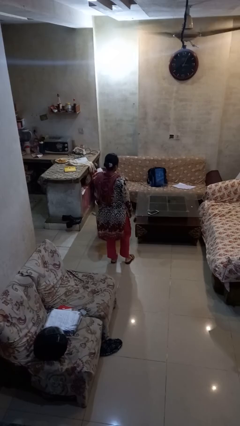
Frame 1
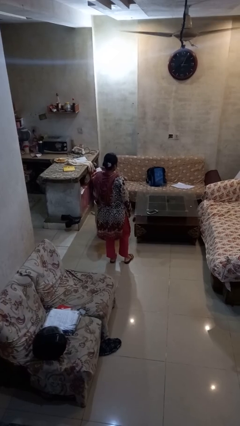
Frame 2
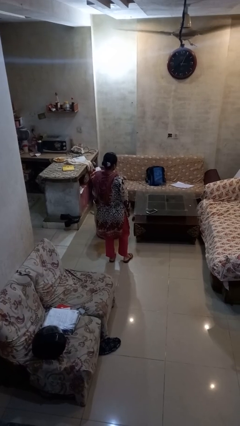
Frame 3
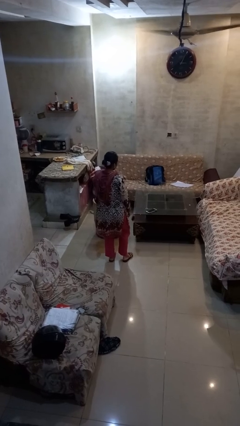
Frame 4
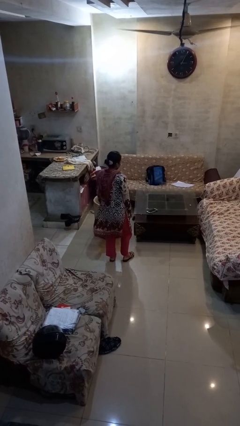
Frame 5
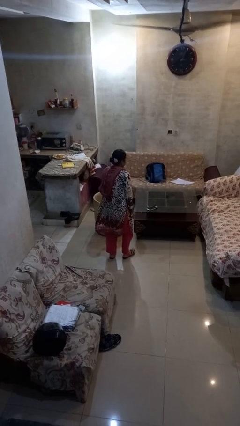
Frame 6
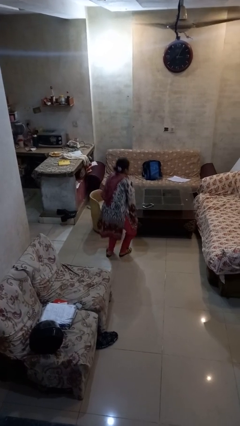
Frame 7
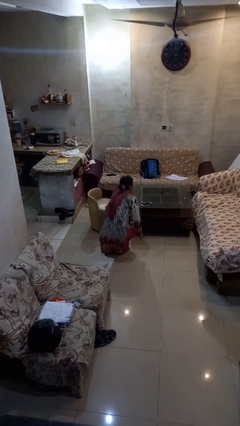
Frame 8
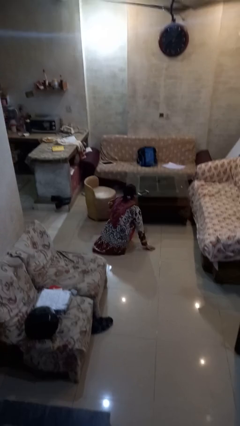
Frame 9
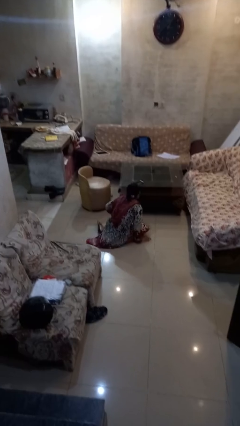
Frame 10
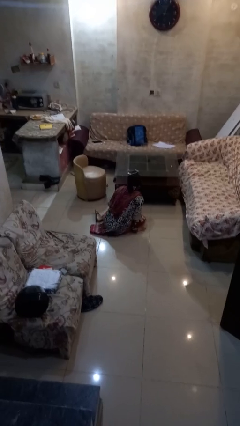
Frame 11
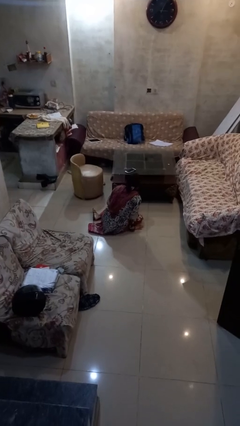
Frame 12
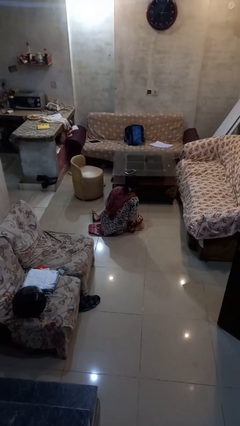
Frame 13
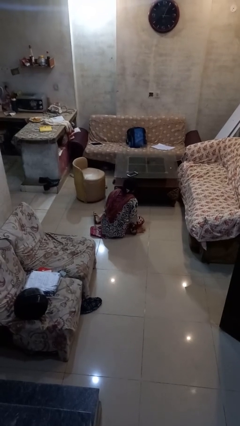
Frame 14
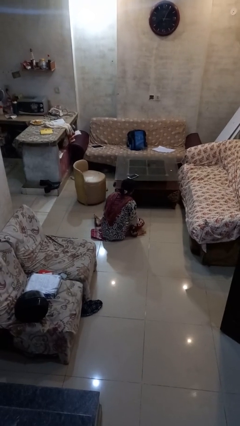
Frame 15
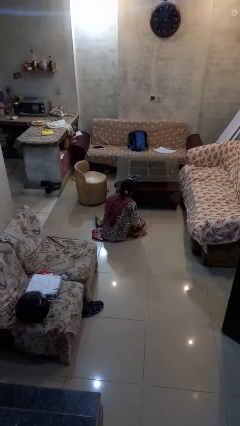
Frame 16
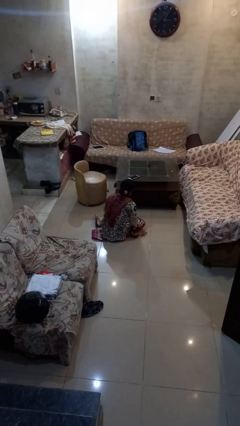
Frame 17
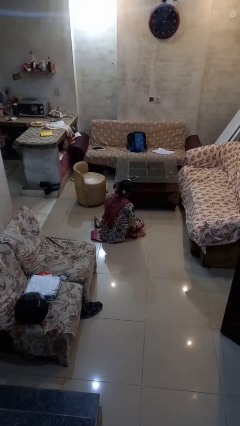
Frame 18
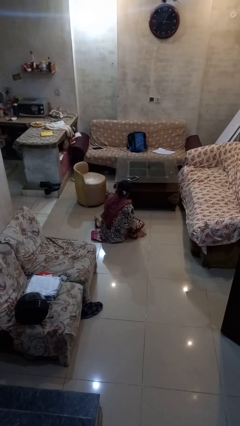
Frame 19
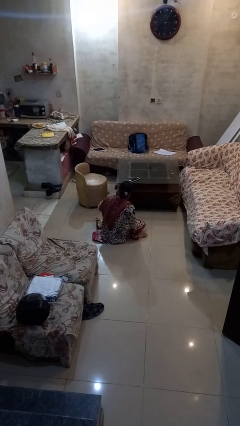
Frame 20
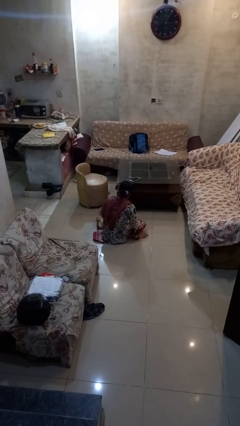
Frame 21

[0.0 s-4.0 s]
person falls while standing

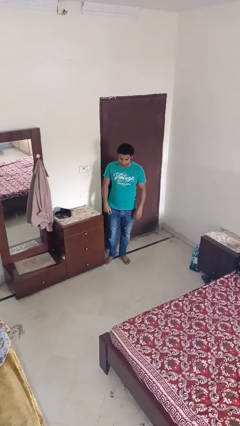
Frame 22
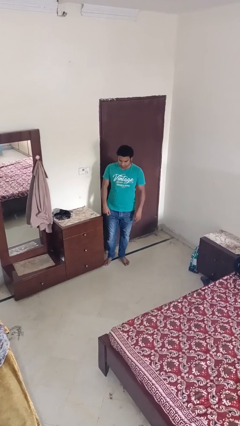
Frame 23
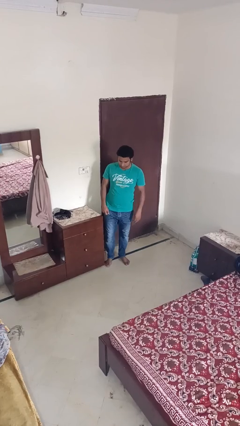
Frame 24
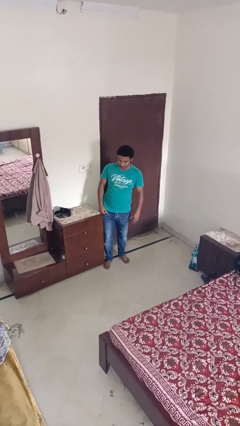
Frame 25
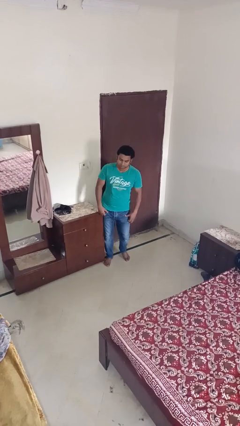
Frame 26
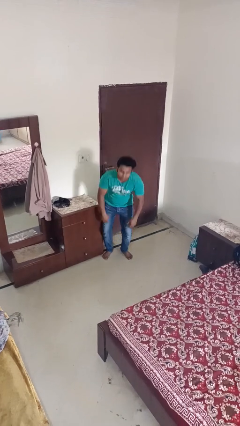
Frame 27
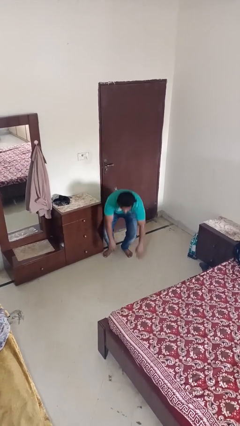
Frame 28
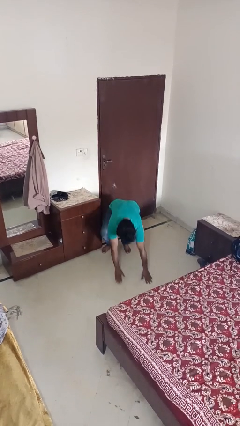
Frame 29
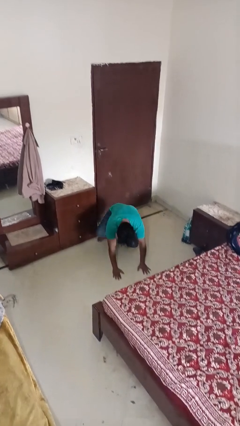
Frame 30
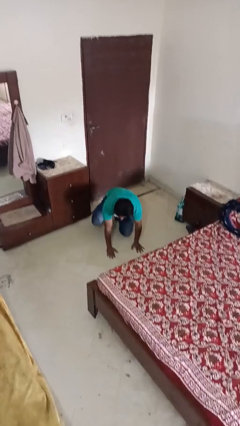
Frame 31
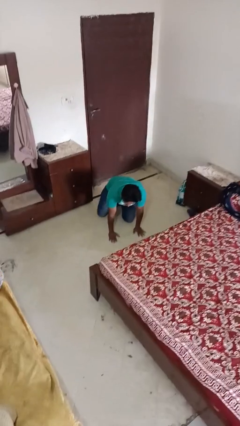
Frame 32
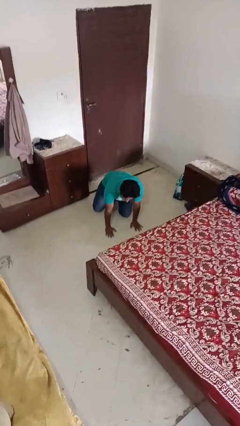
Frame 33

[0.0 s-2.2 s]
person trips on object on floor

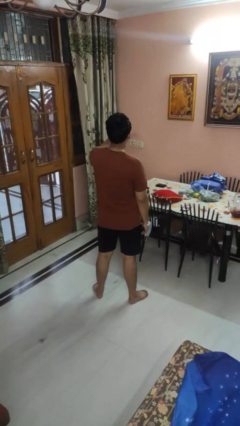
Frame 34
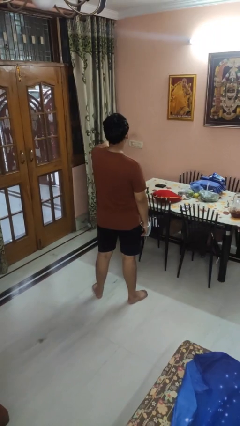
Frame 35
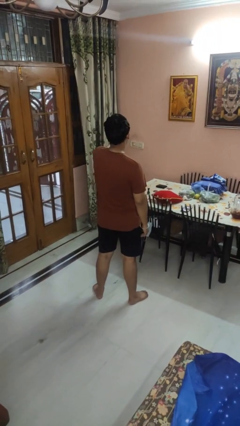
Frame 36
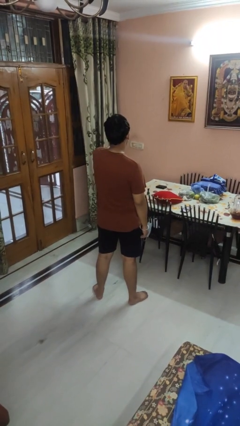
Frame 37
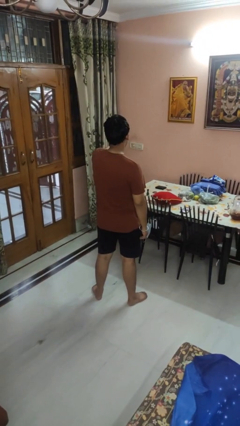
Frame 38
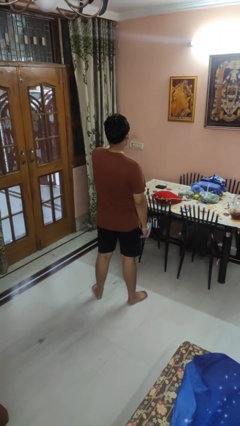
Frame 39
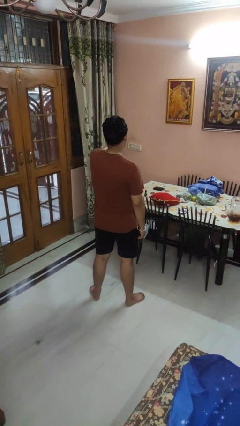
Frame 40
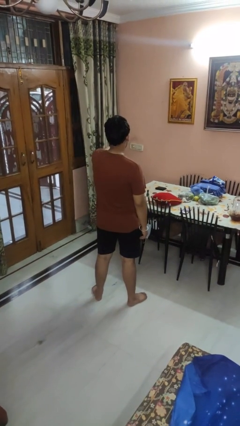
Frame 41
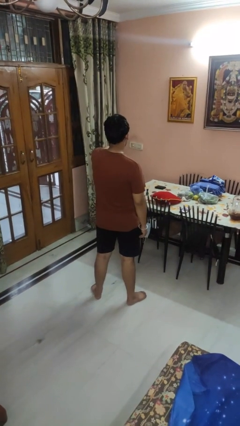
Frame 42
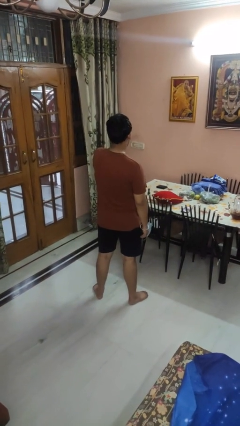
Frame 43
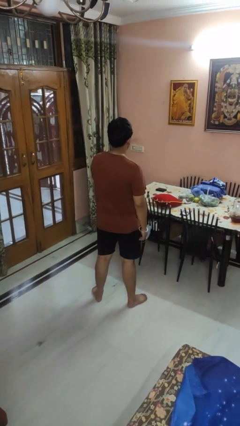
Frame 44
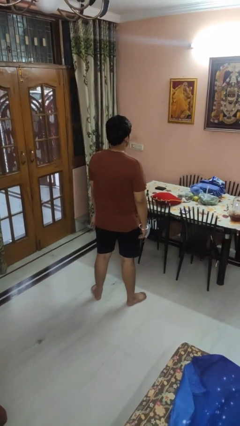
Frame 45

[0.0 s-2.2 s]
person gestures stop

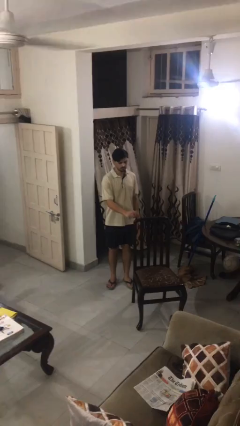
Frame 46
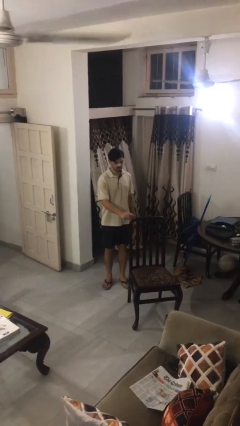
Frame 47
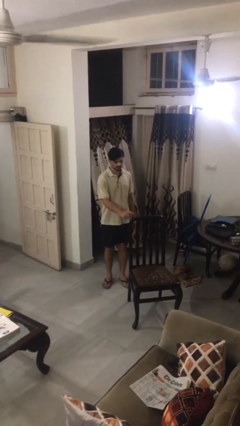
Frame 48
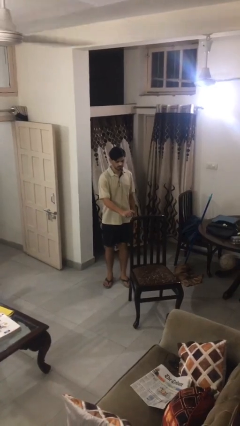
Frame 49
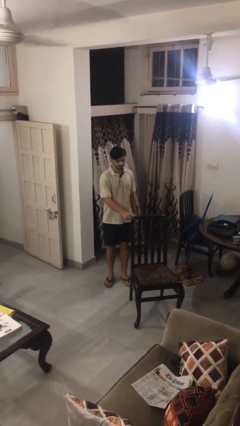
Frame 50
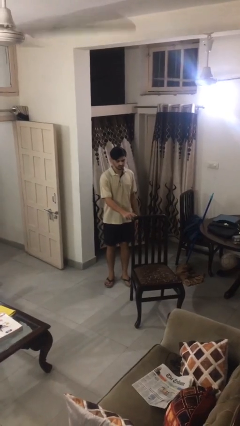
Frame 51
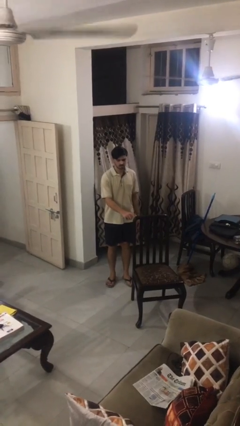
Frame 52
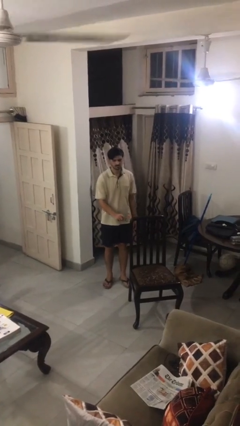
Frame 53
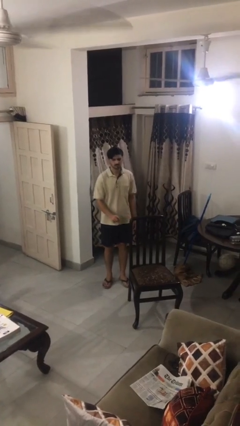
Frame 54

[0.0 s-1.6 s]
person taps object with finger

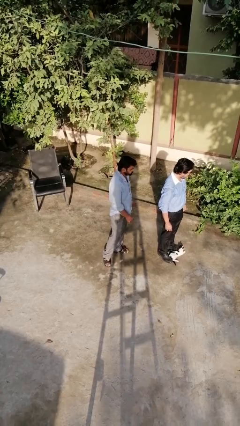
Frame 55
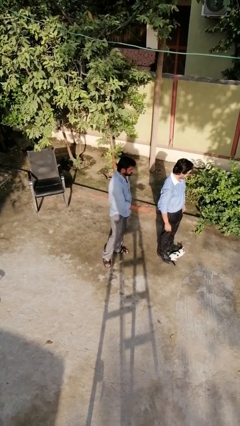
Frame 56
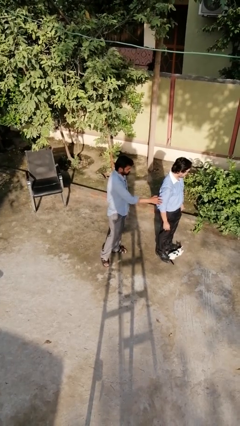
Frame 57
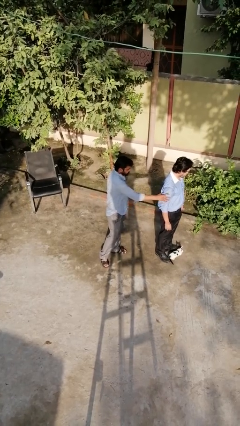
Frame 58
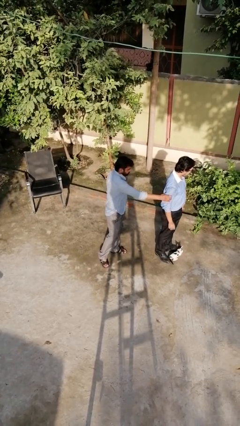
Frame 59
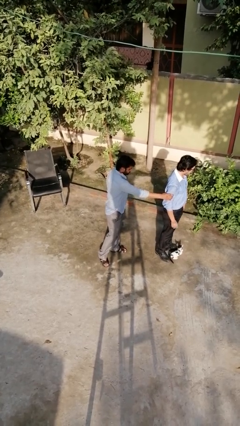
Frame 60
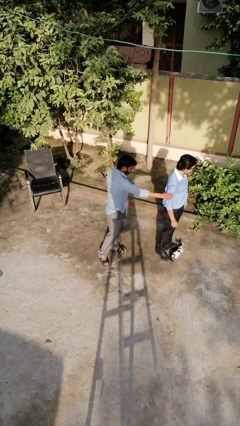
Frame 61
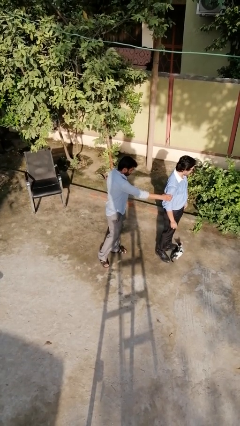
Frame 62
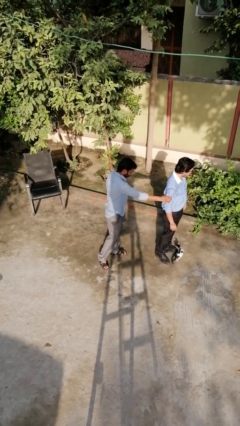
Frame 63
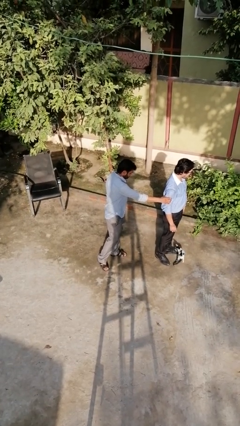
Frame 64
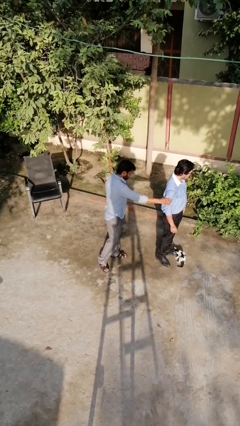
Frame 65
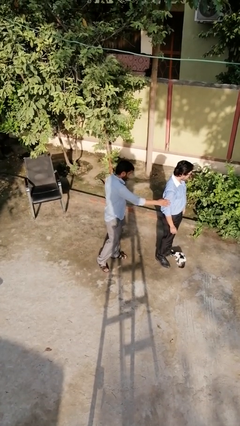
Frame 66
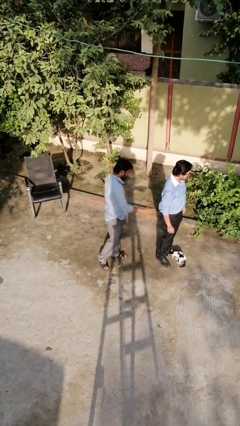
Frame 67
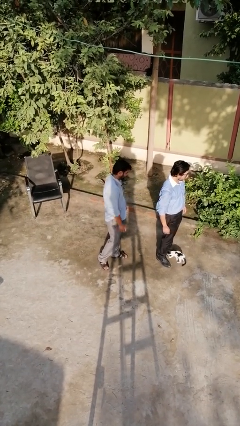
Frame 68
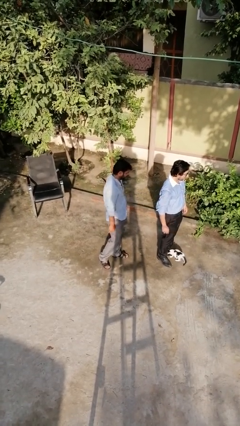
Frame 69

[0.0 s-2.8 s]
person grabs person by bicep

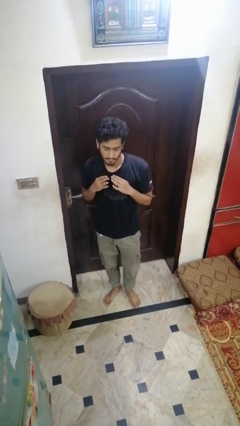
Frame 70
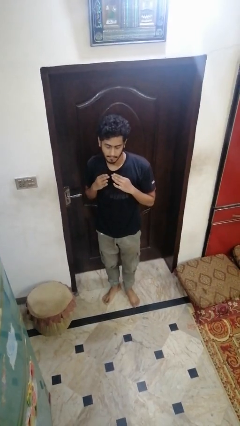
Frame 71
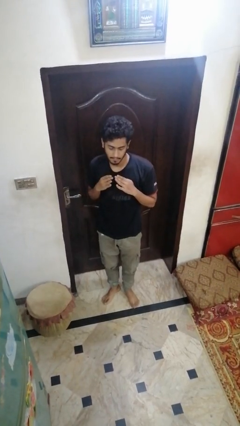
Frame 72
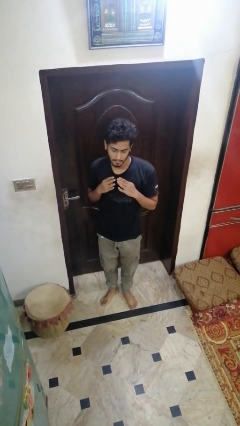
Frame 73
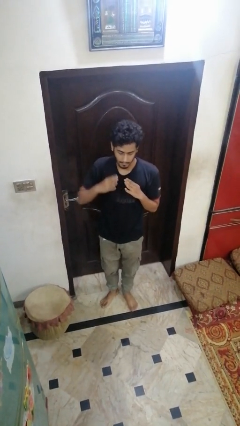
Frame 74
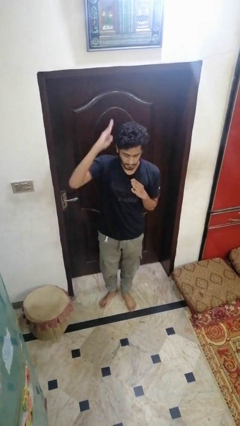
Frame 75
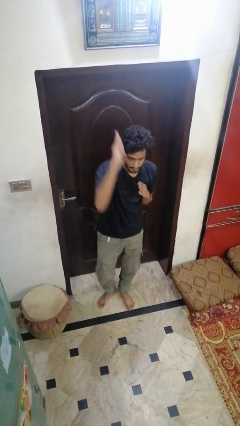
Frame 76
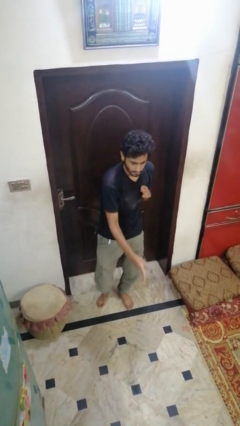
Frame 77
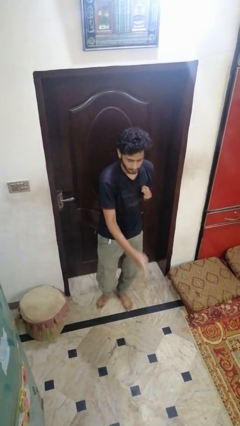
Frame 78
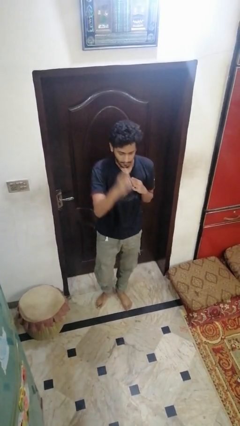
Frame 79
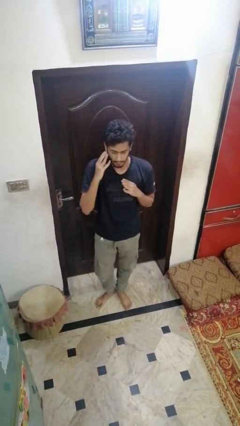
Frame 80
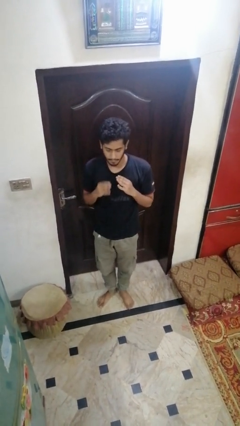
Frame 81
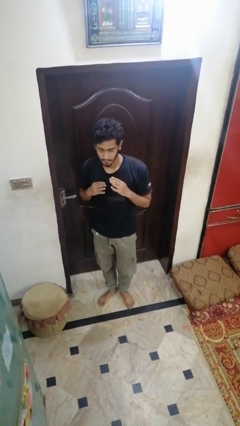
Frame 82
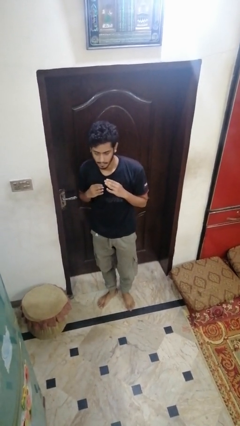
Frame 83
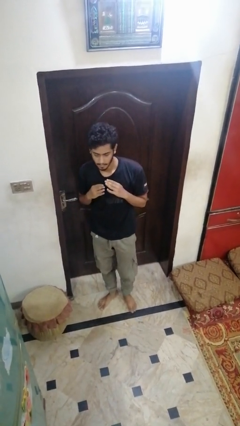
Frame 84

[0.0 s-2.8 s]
person flosses

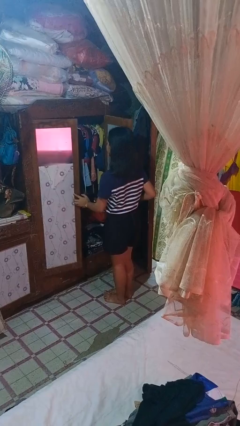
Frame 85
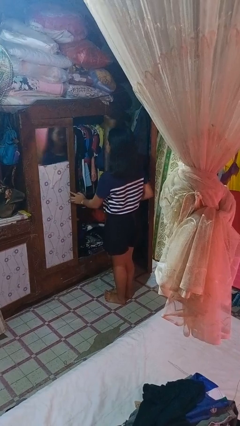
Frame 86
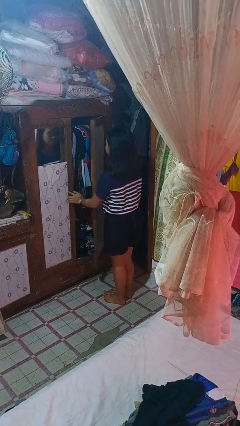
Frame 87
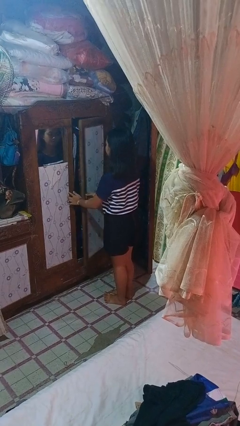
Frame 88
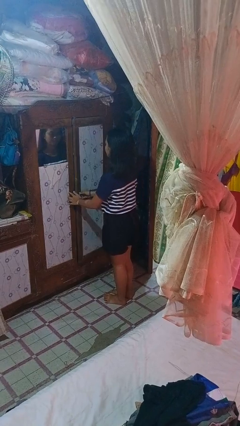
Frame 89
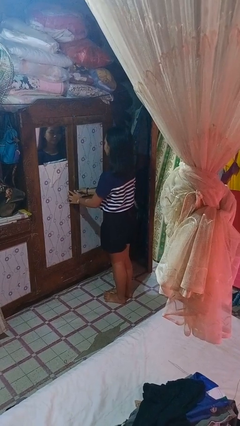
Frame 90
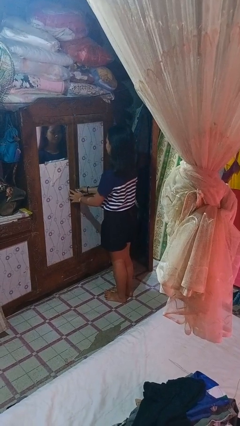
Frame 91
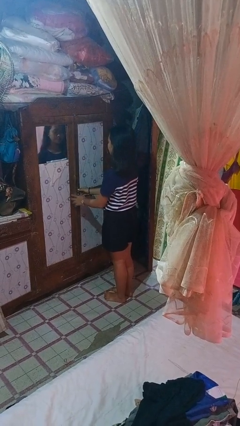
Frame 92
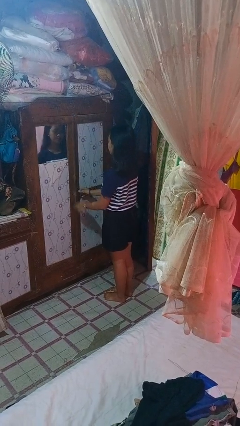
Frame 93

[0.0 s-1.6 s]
person closes closet door
